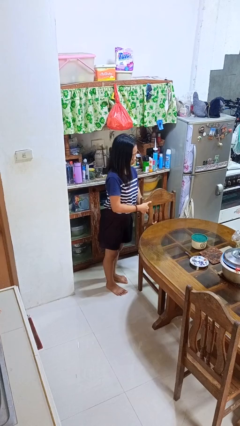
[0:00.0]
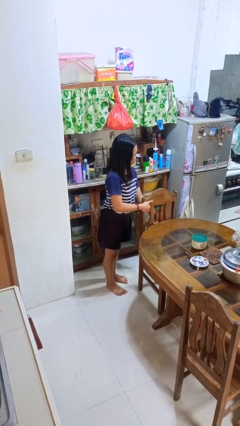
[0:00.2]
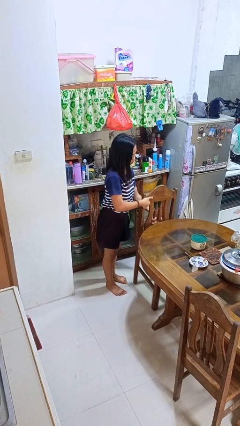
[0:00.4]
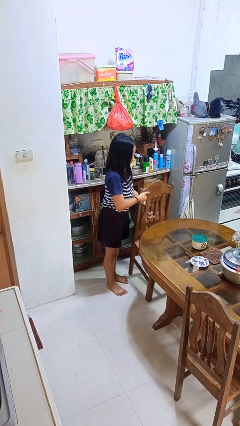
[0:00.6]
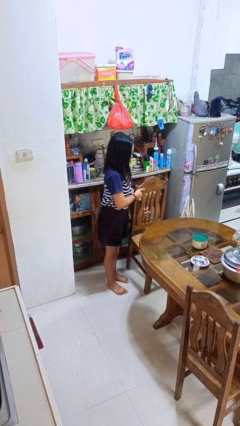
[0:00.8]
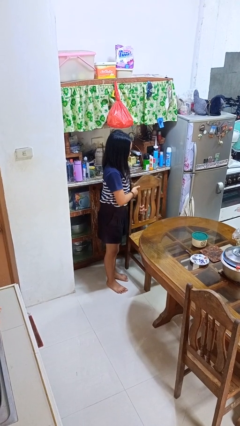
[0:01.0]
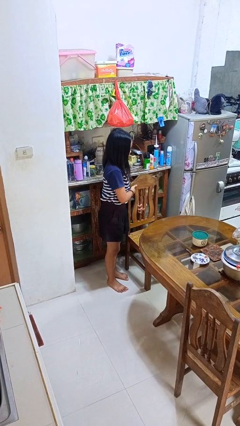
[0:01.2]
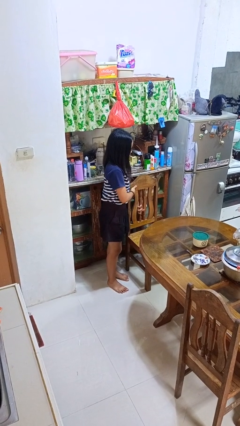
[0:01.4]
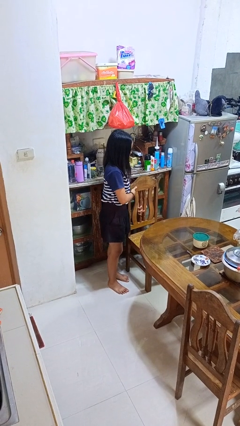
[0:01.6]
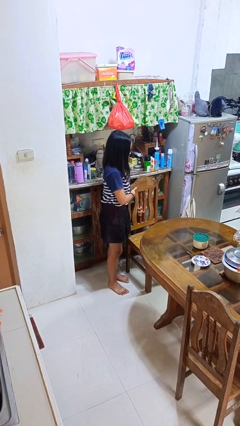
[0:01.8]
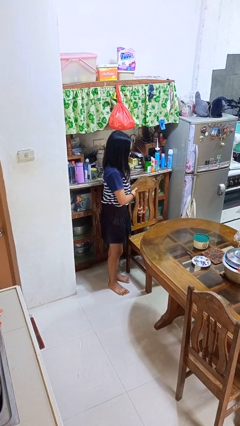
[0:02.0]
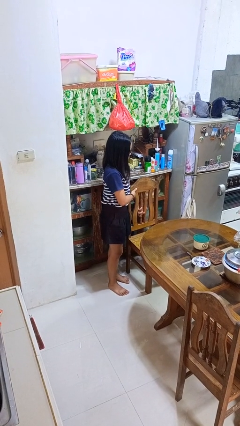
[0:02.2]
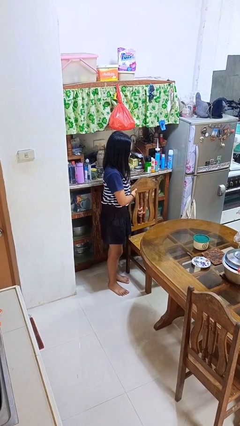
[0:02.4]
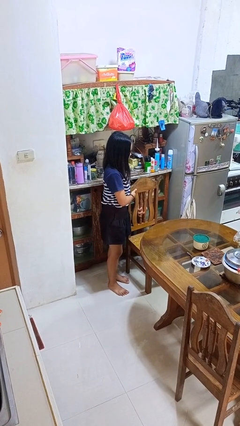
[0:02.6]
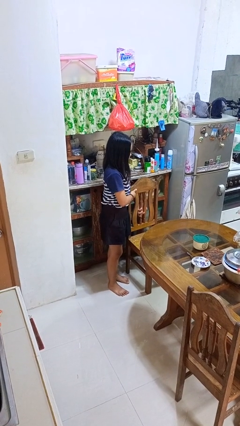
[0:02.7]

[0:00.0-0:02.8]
person pulls out chair

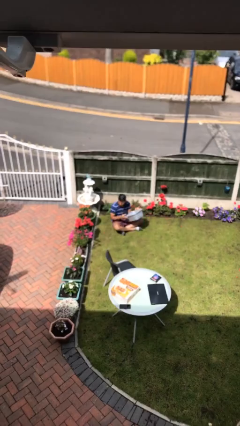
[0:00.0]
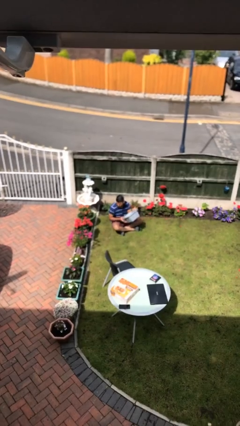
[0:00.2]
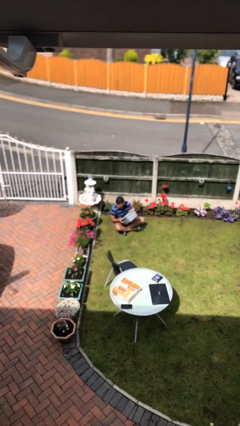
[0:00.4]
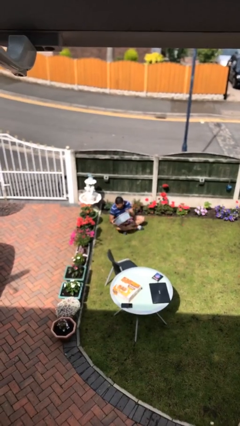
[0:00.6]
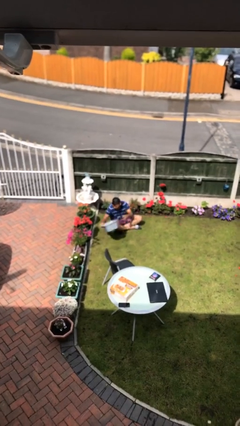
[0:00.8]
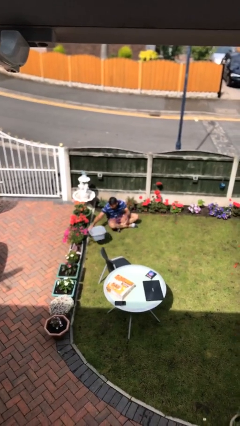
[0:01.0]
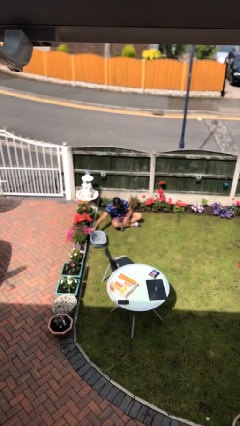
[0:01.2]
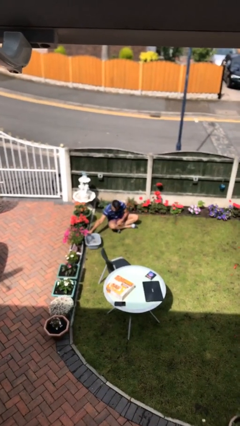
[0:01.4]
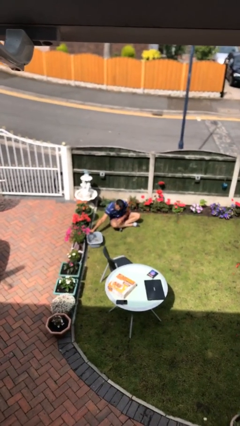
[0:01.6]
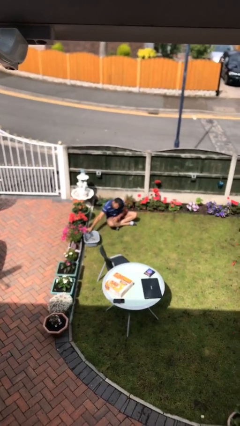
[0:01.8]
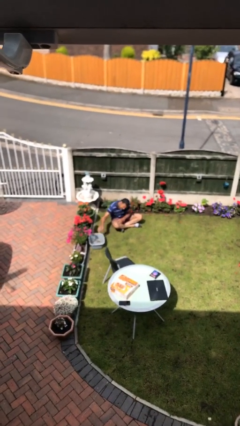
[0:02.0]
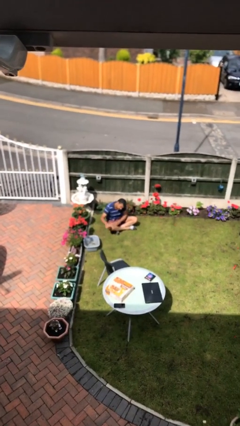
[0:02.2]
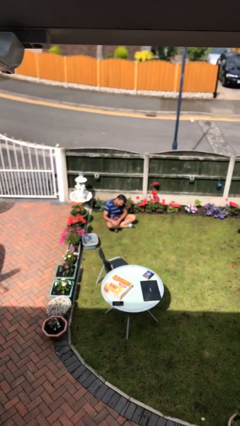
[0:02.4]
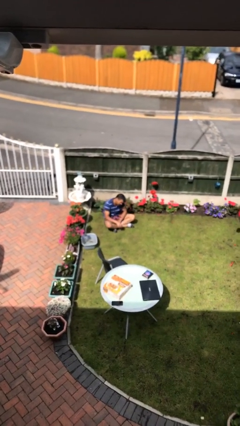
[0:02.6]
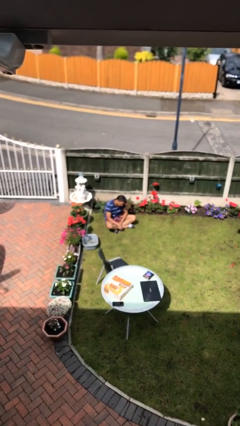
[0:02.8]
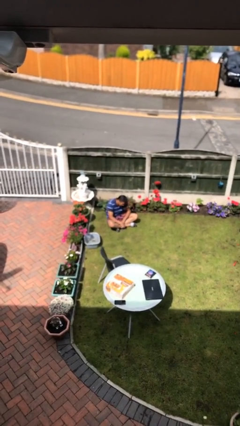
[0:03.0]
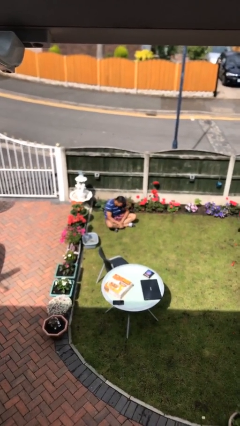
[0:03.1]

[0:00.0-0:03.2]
person puts down object on floor

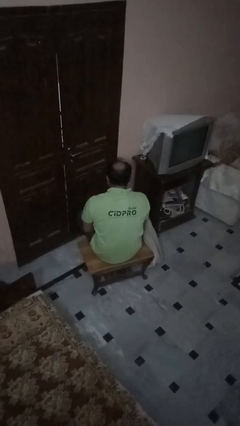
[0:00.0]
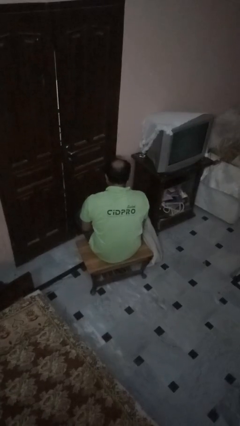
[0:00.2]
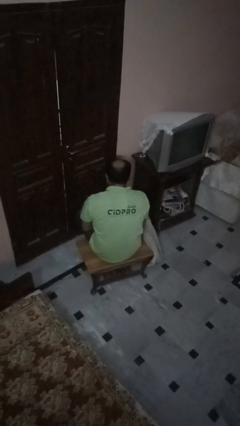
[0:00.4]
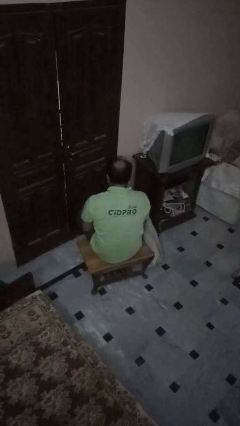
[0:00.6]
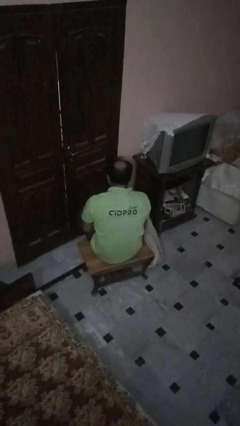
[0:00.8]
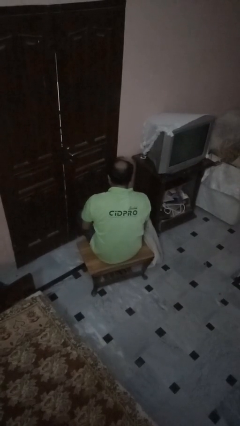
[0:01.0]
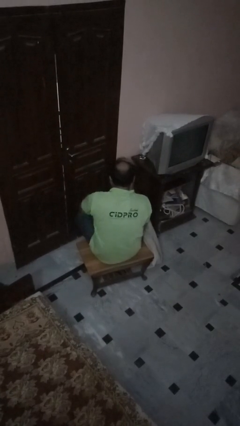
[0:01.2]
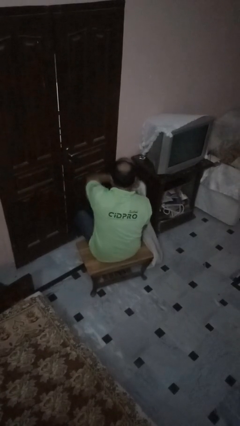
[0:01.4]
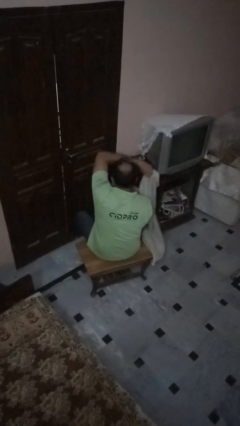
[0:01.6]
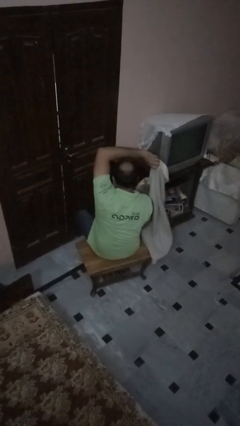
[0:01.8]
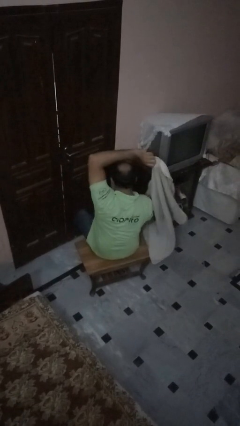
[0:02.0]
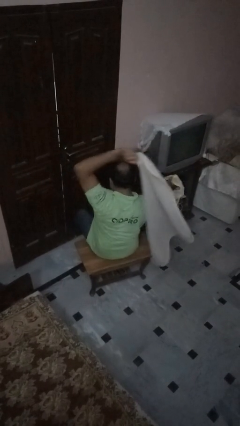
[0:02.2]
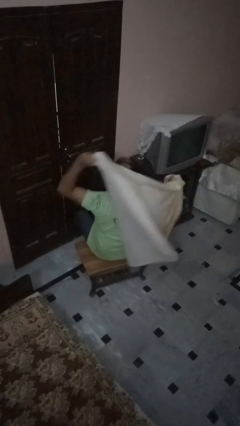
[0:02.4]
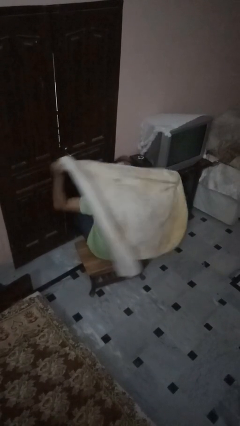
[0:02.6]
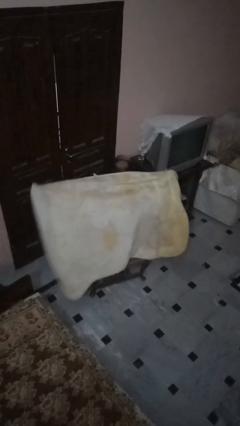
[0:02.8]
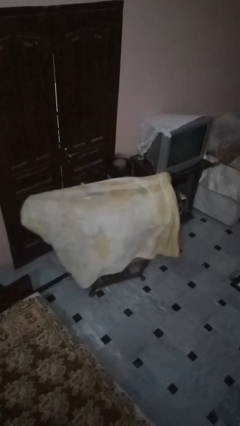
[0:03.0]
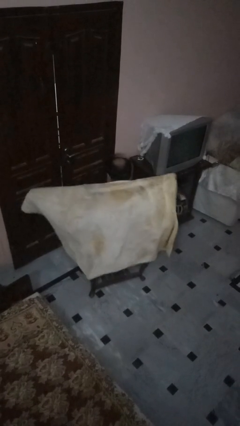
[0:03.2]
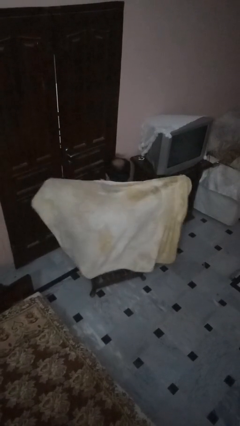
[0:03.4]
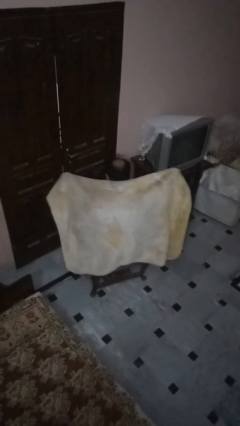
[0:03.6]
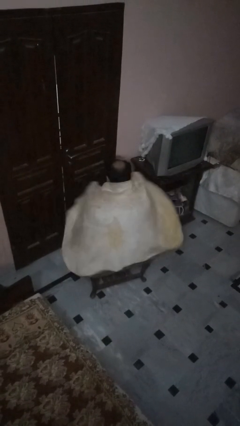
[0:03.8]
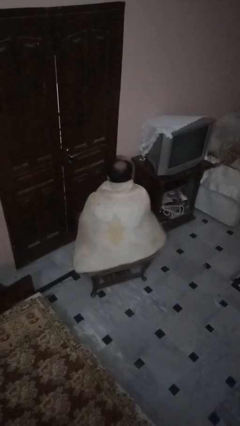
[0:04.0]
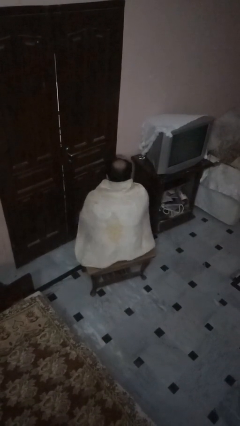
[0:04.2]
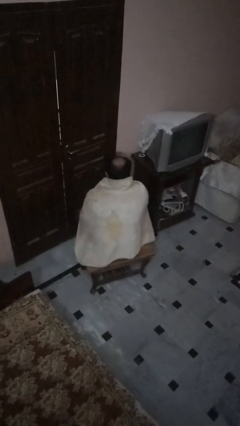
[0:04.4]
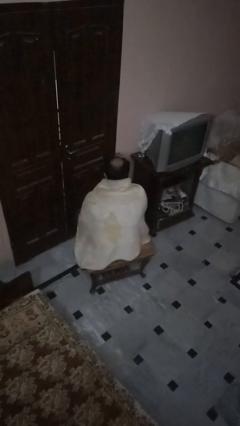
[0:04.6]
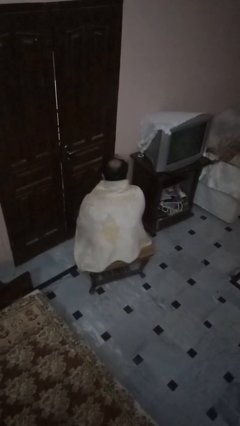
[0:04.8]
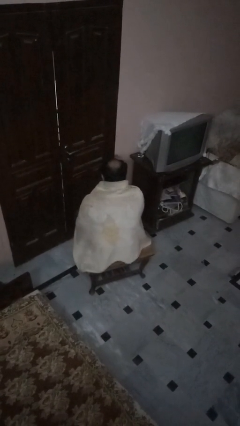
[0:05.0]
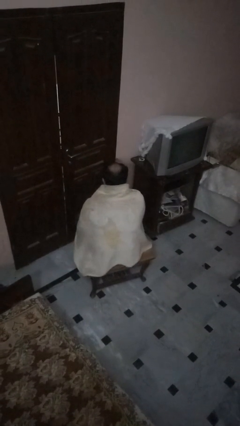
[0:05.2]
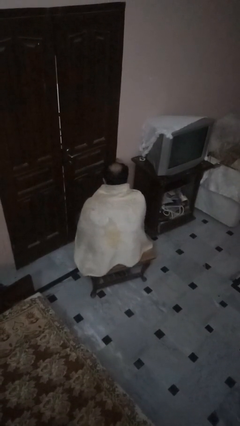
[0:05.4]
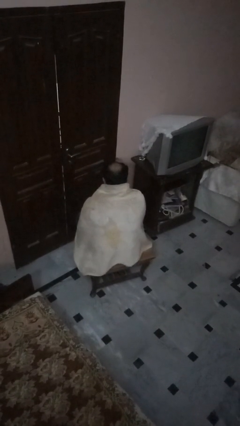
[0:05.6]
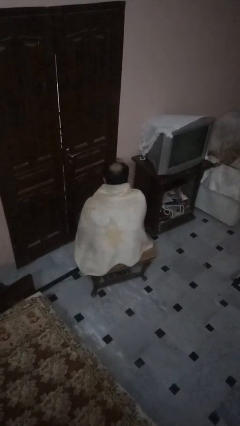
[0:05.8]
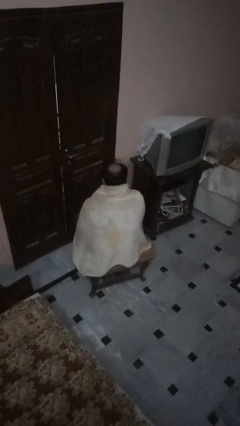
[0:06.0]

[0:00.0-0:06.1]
person covers with blanket

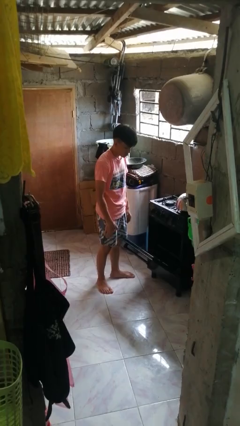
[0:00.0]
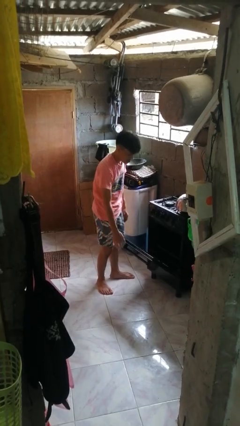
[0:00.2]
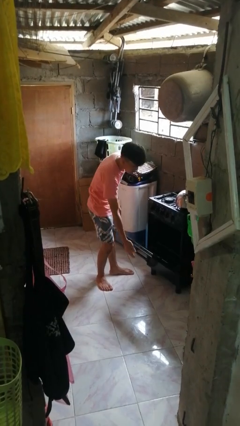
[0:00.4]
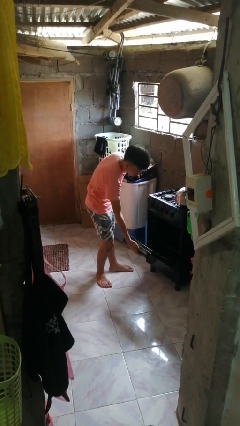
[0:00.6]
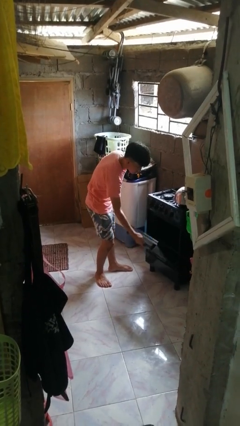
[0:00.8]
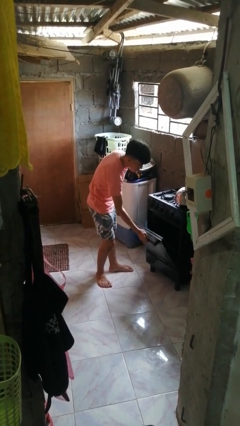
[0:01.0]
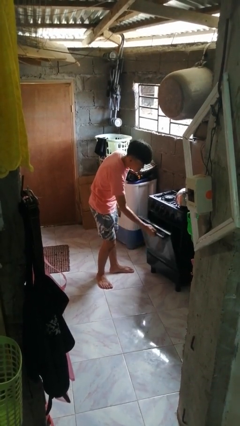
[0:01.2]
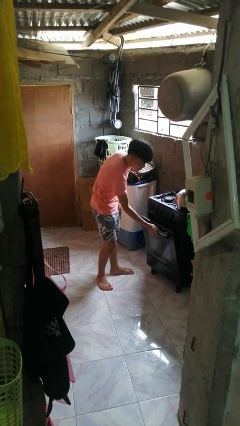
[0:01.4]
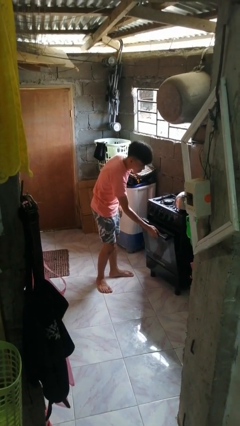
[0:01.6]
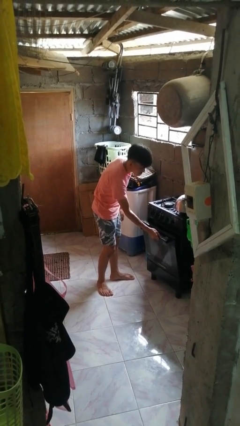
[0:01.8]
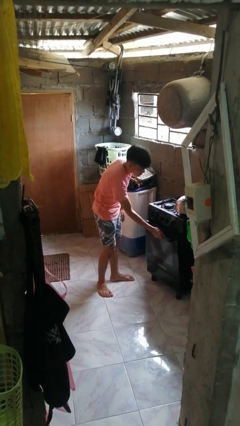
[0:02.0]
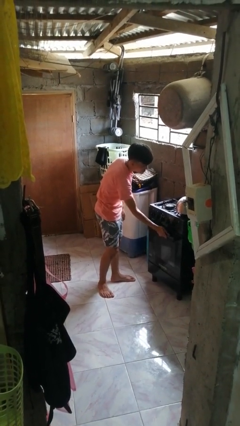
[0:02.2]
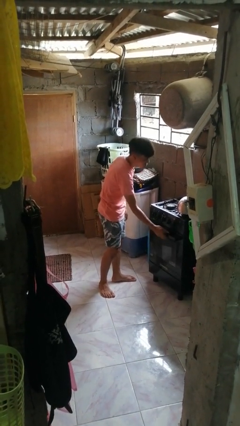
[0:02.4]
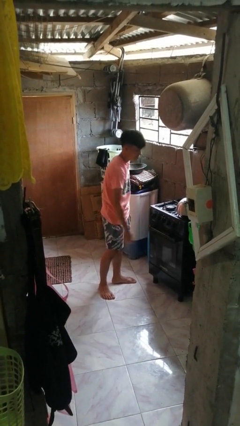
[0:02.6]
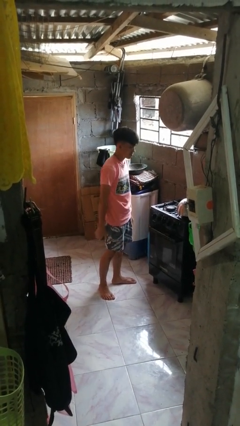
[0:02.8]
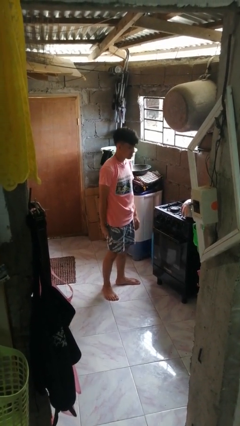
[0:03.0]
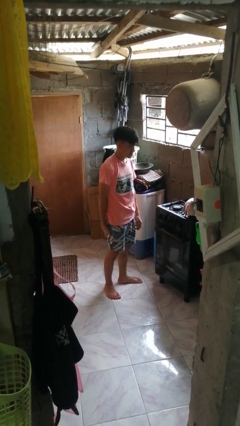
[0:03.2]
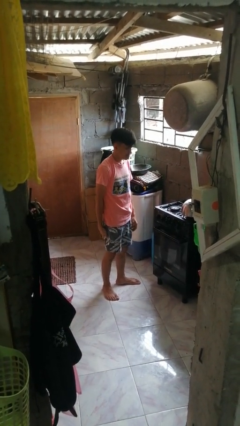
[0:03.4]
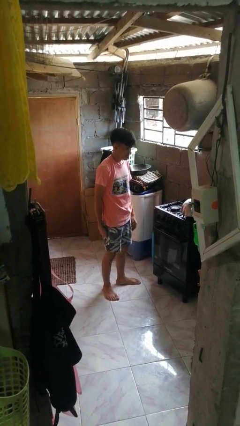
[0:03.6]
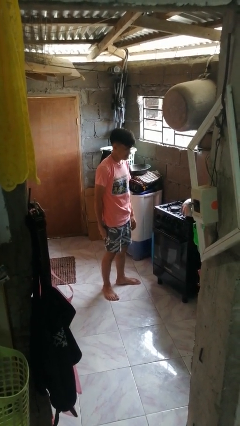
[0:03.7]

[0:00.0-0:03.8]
person closes oven door

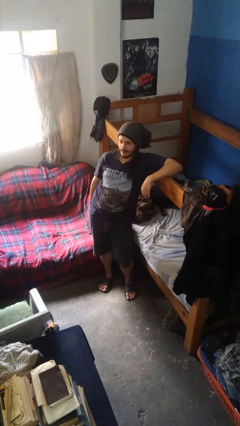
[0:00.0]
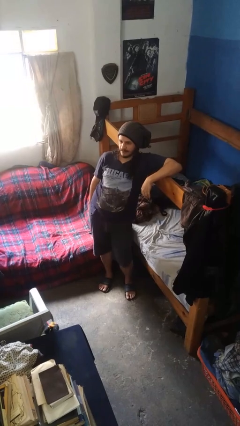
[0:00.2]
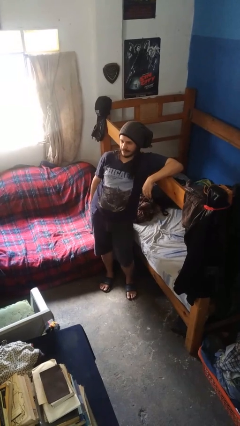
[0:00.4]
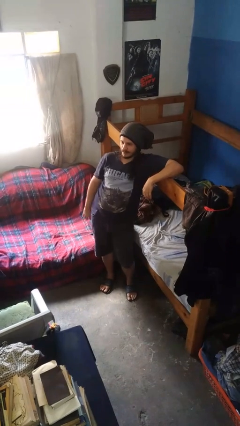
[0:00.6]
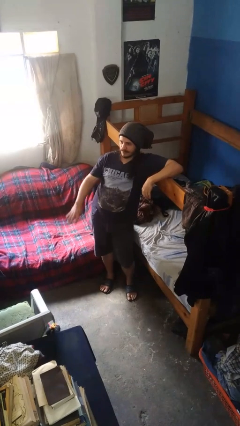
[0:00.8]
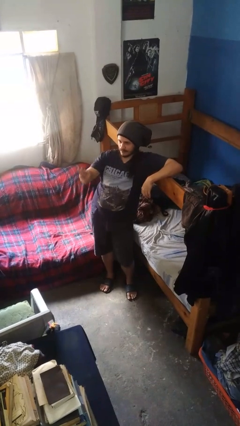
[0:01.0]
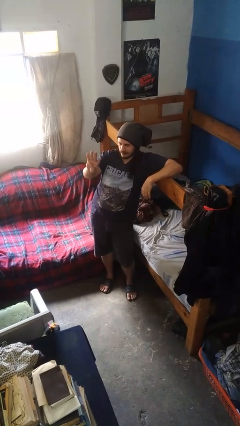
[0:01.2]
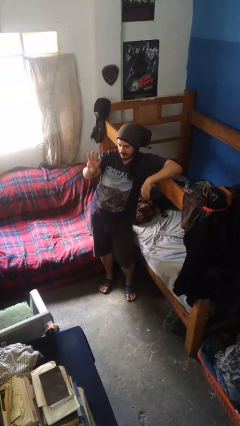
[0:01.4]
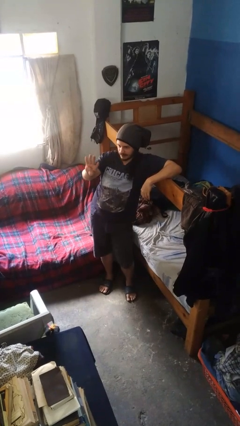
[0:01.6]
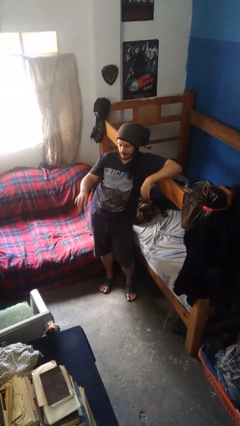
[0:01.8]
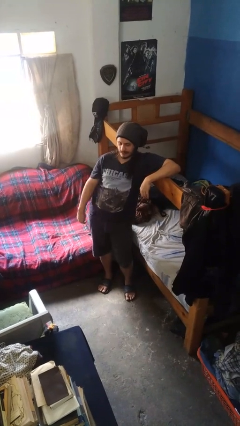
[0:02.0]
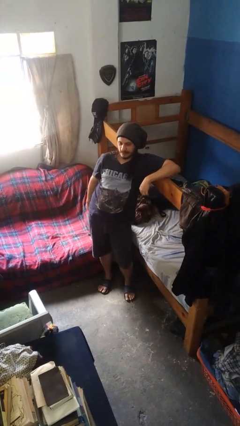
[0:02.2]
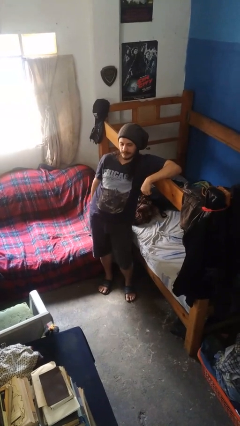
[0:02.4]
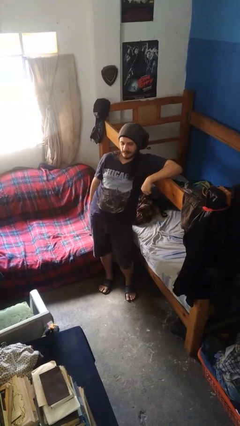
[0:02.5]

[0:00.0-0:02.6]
person gestures number four
